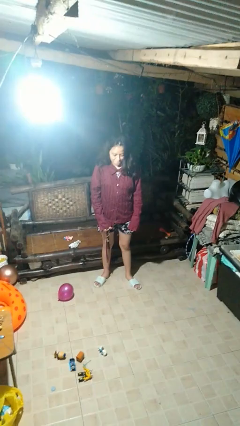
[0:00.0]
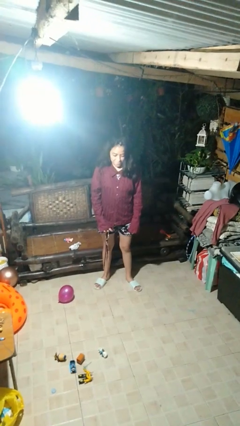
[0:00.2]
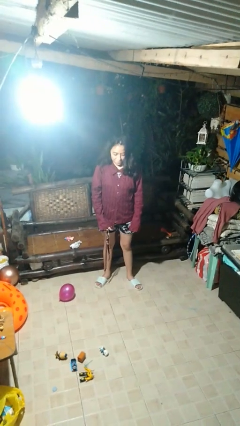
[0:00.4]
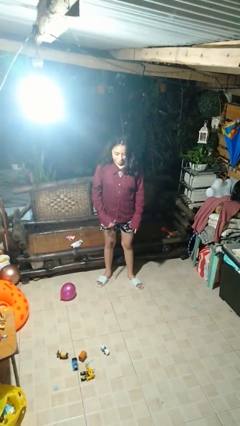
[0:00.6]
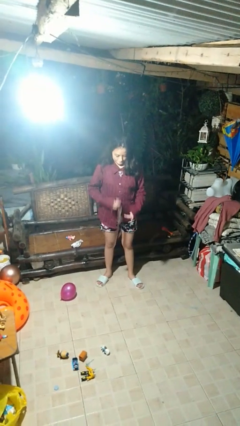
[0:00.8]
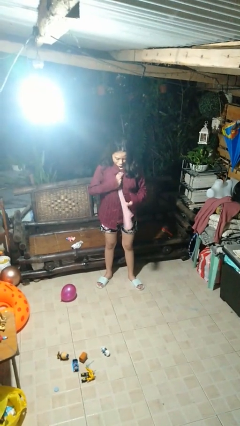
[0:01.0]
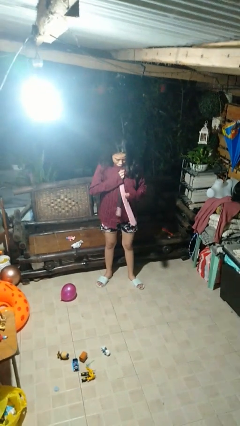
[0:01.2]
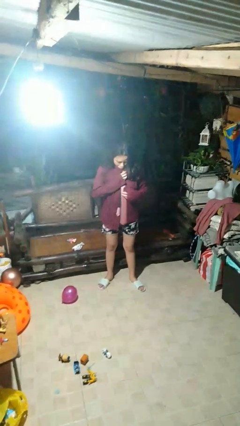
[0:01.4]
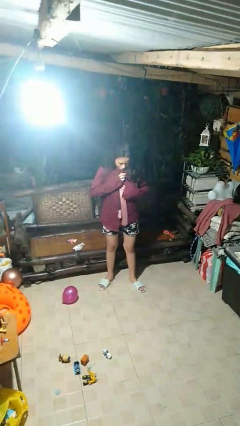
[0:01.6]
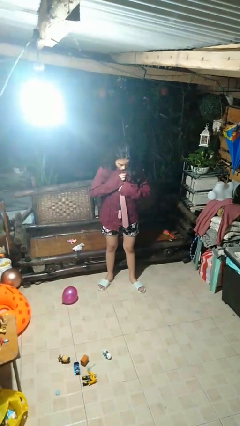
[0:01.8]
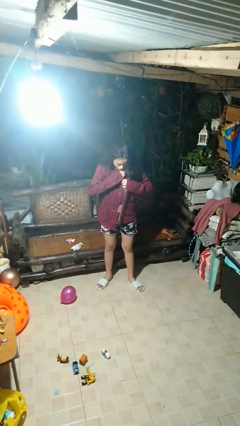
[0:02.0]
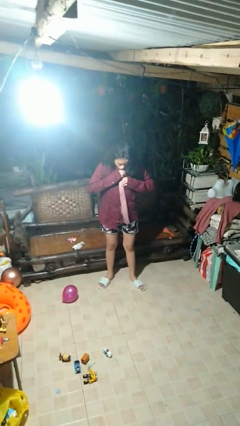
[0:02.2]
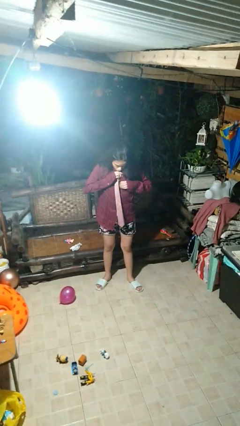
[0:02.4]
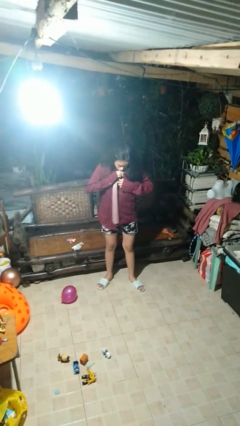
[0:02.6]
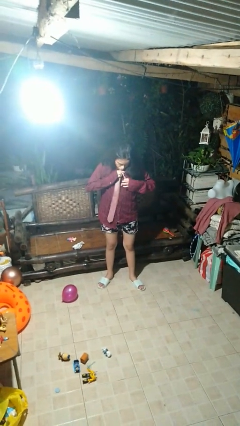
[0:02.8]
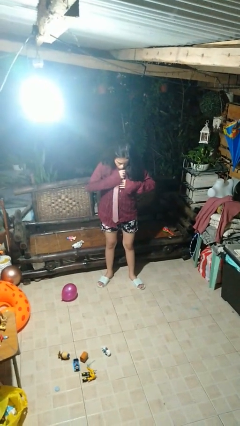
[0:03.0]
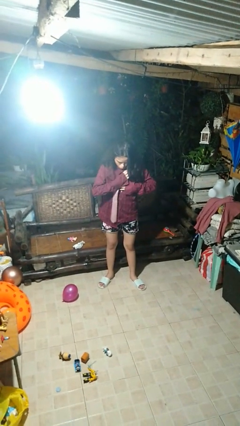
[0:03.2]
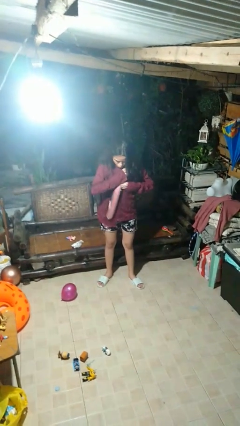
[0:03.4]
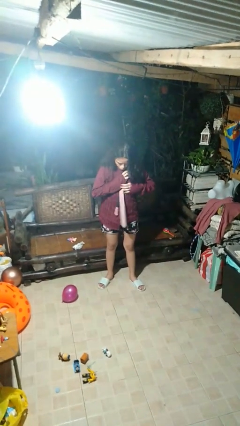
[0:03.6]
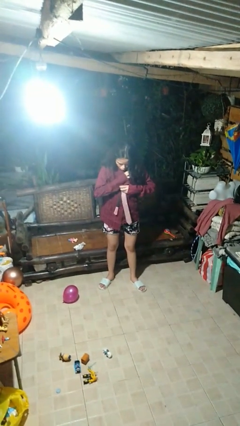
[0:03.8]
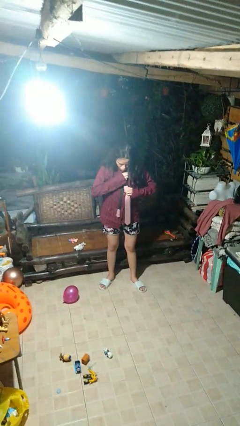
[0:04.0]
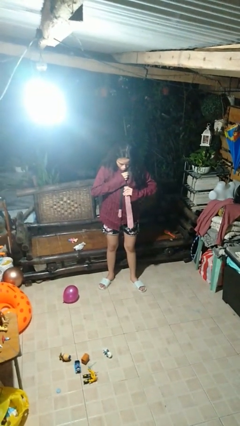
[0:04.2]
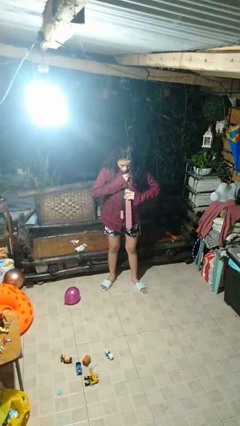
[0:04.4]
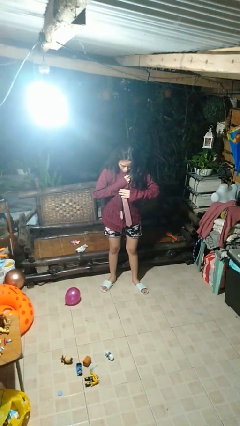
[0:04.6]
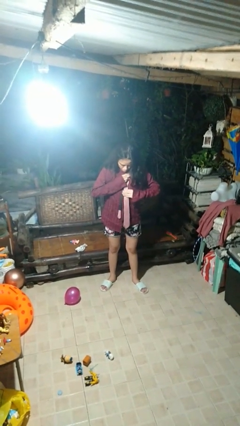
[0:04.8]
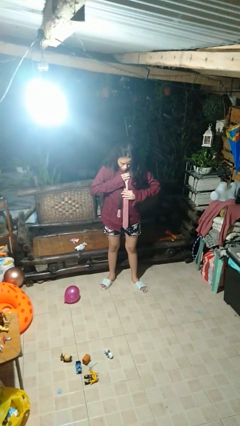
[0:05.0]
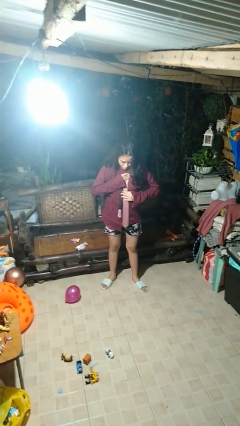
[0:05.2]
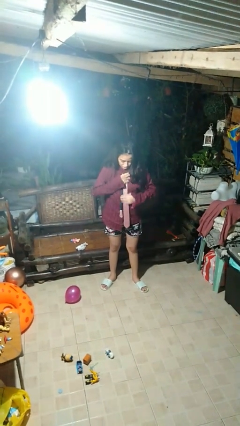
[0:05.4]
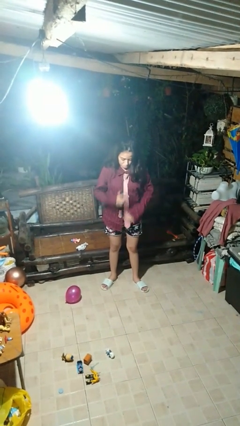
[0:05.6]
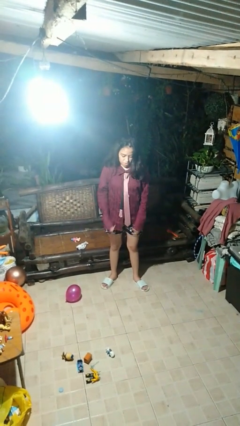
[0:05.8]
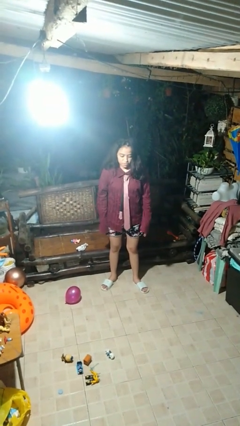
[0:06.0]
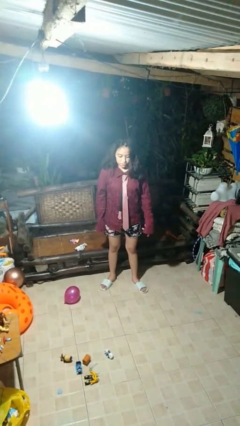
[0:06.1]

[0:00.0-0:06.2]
person puts on necktie

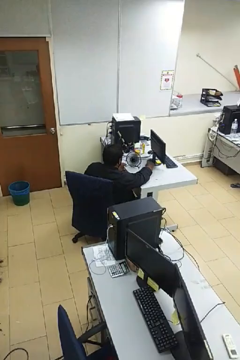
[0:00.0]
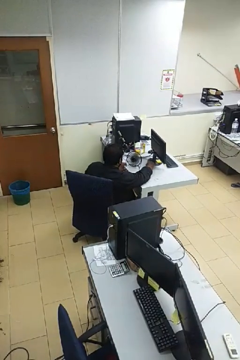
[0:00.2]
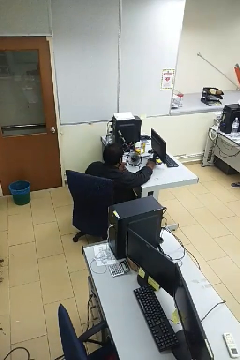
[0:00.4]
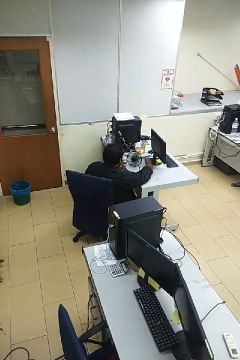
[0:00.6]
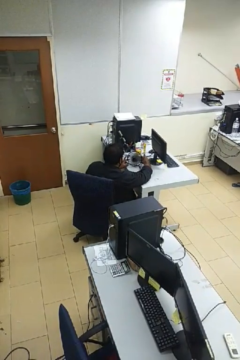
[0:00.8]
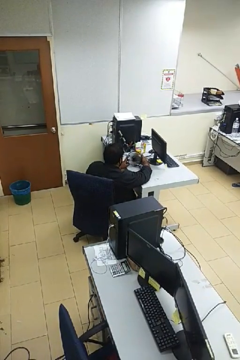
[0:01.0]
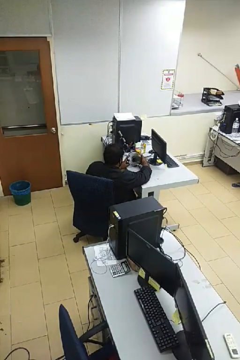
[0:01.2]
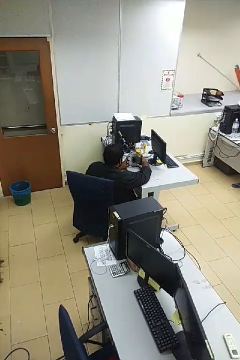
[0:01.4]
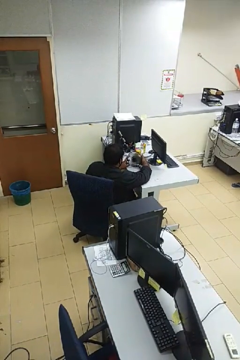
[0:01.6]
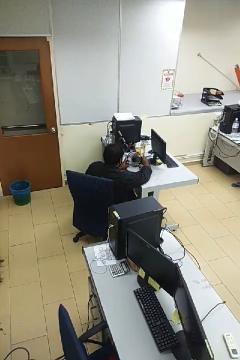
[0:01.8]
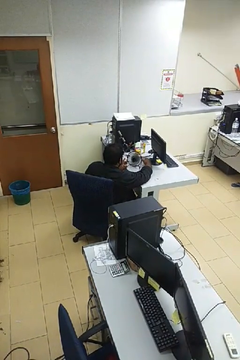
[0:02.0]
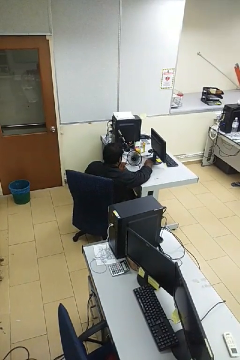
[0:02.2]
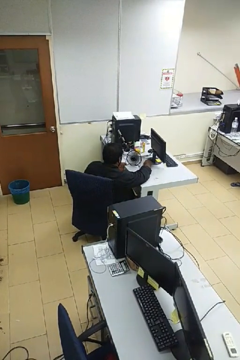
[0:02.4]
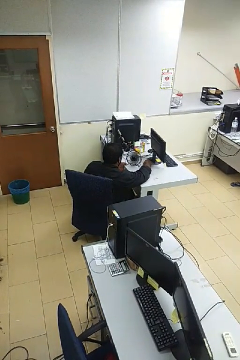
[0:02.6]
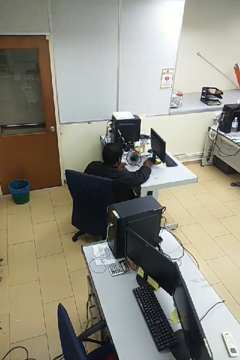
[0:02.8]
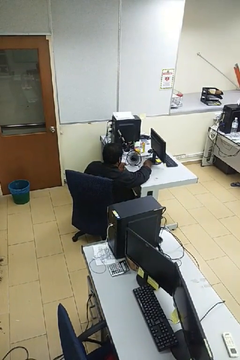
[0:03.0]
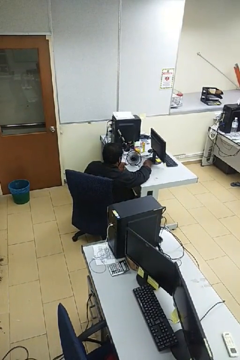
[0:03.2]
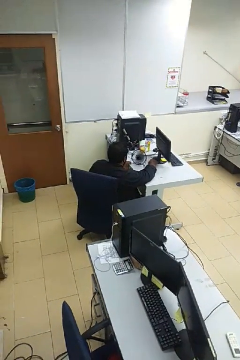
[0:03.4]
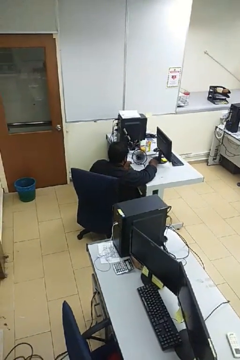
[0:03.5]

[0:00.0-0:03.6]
person turns off fan

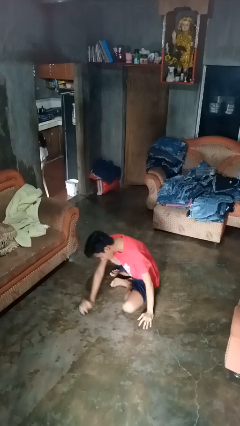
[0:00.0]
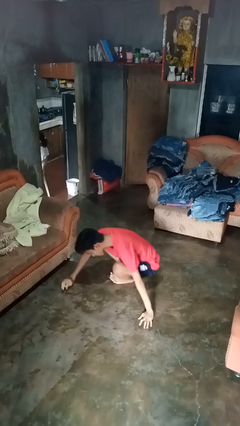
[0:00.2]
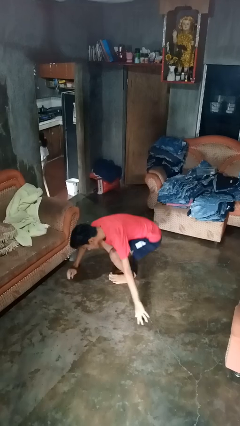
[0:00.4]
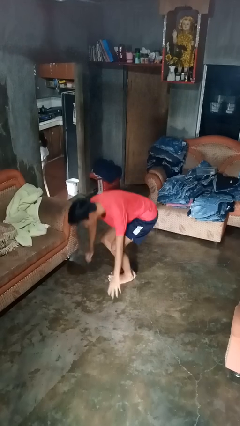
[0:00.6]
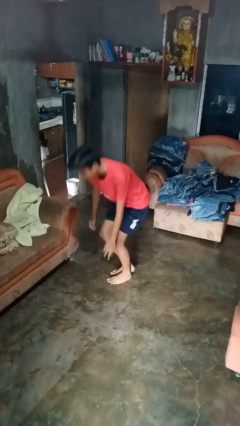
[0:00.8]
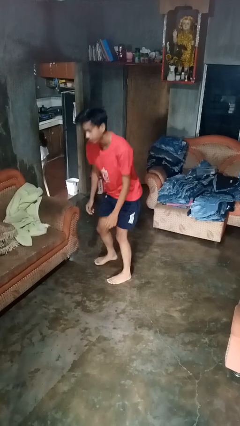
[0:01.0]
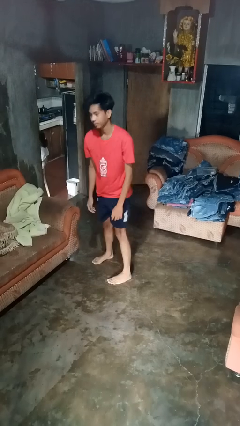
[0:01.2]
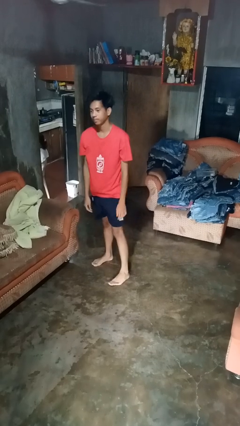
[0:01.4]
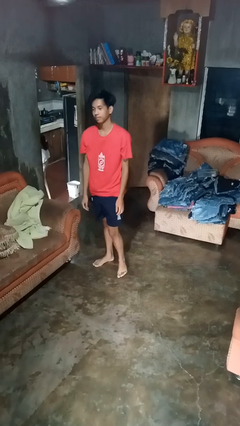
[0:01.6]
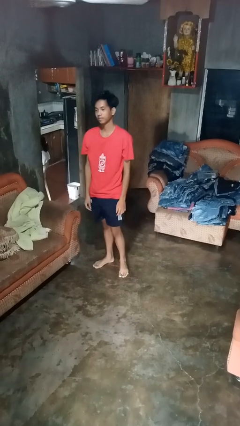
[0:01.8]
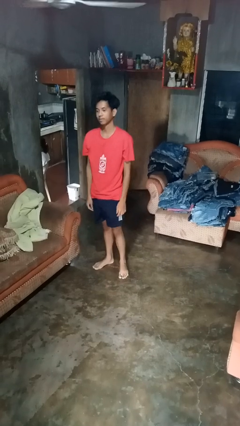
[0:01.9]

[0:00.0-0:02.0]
person stands up from floor

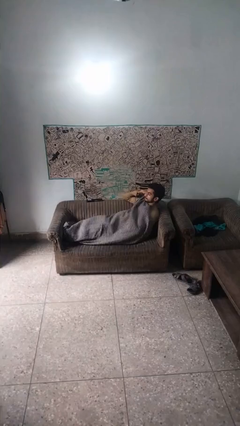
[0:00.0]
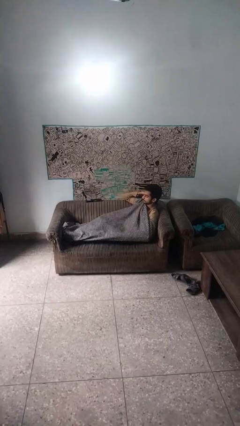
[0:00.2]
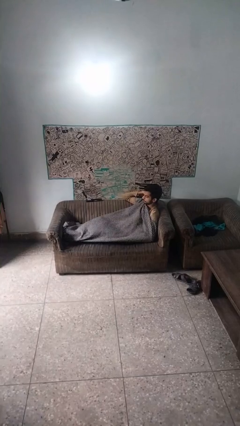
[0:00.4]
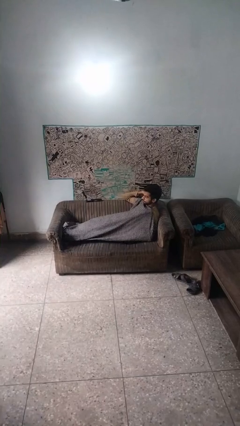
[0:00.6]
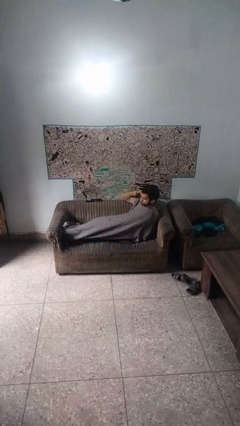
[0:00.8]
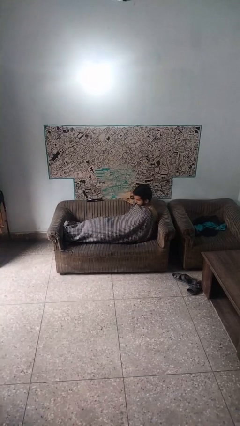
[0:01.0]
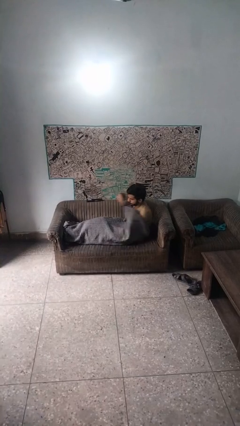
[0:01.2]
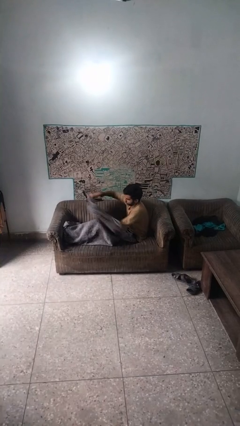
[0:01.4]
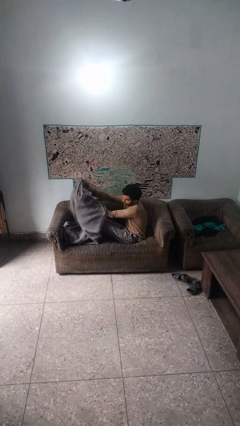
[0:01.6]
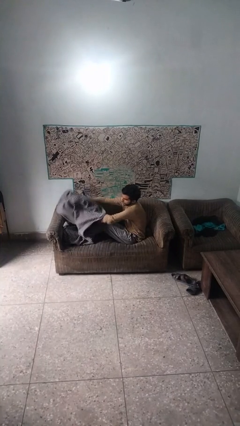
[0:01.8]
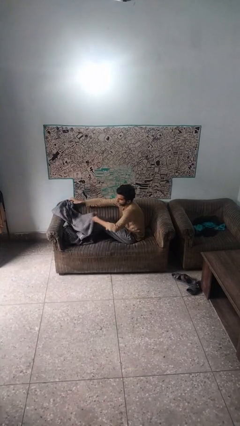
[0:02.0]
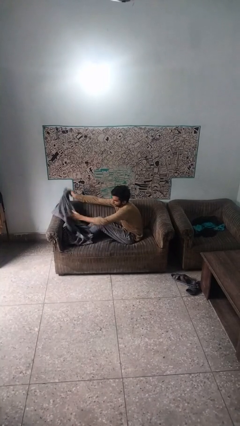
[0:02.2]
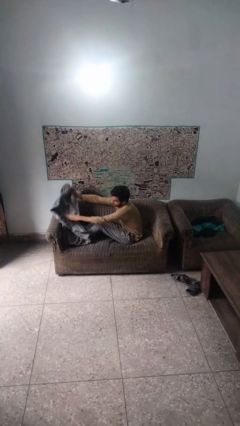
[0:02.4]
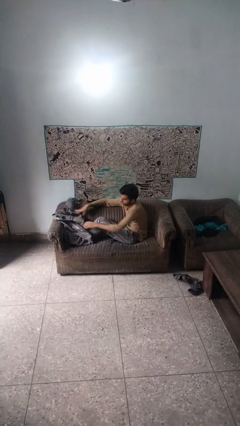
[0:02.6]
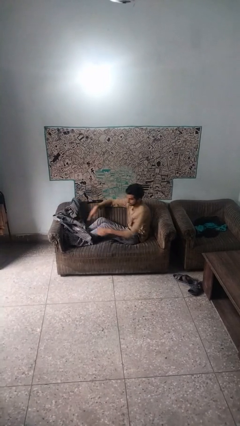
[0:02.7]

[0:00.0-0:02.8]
person uncovers with blanket

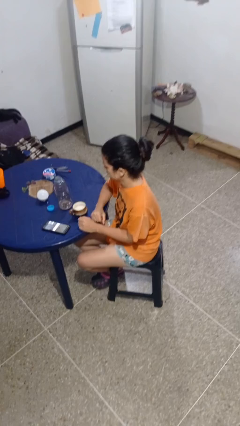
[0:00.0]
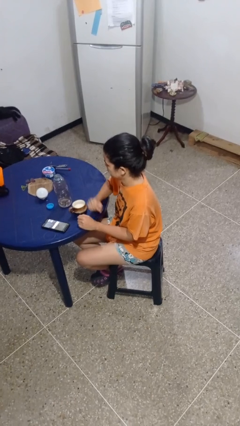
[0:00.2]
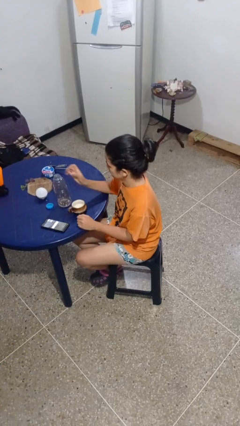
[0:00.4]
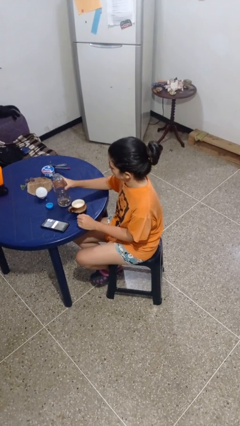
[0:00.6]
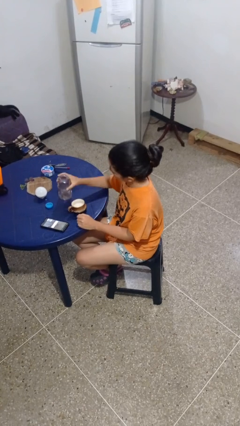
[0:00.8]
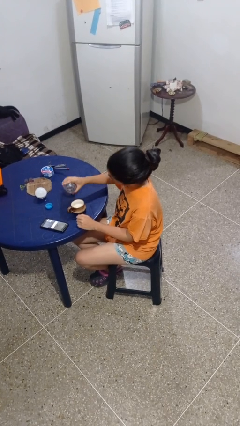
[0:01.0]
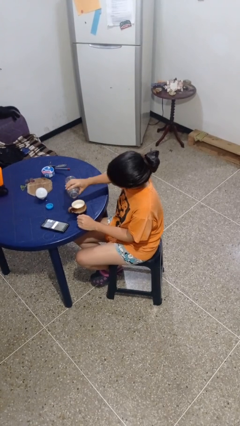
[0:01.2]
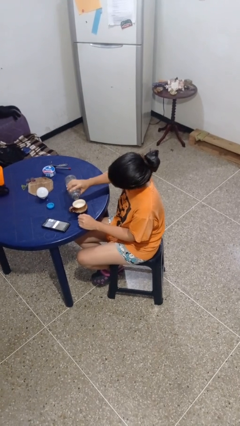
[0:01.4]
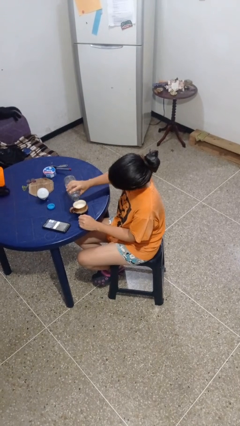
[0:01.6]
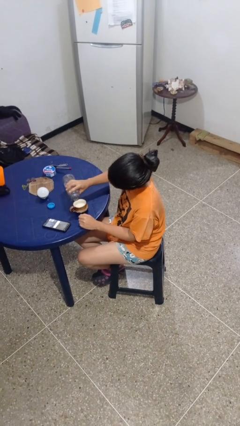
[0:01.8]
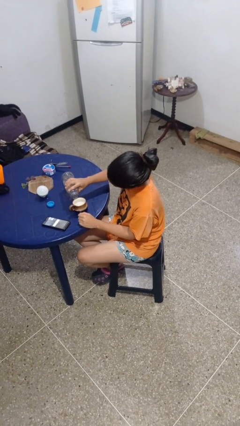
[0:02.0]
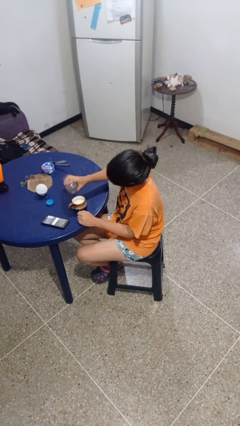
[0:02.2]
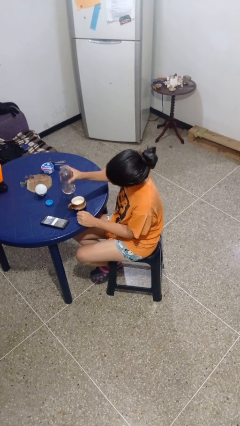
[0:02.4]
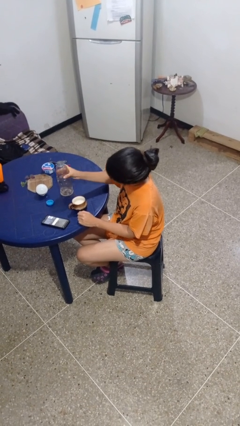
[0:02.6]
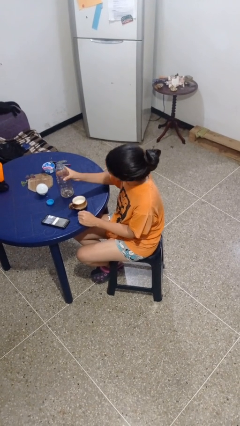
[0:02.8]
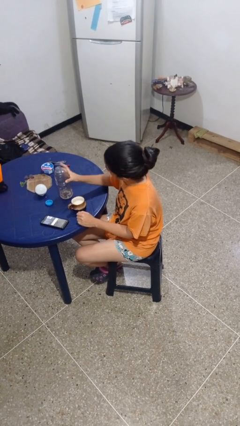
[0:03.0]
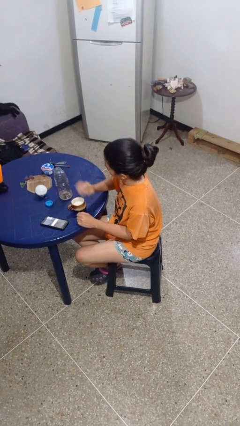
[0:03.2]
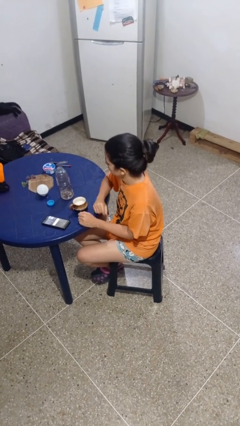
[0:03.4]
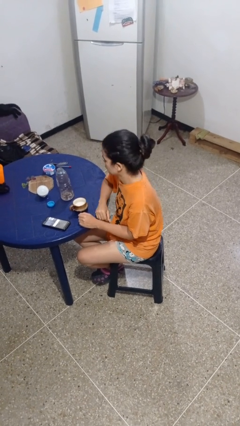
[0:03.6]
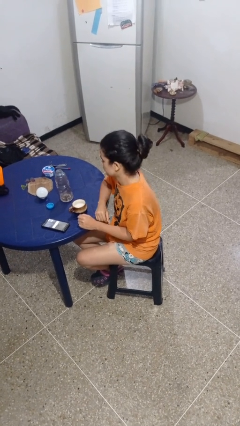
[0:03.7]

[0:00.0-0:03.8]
person pours liquid into cup
